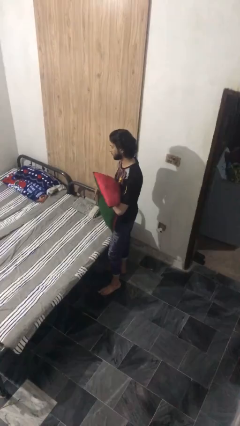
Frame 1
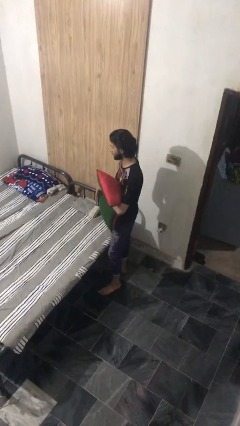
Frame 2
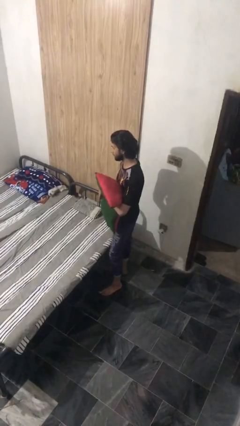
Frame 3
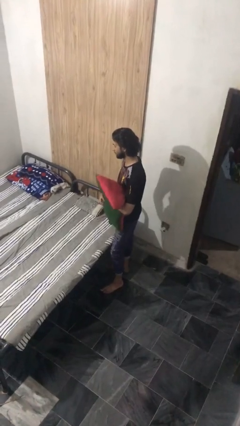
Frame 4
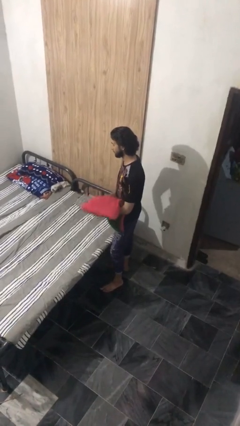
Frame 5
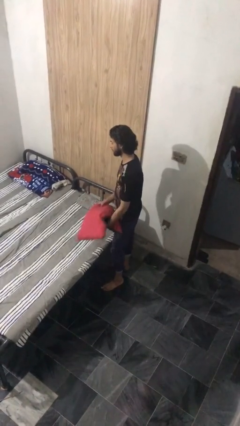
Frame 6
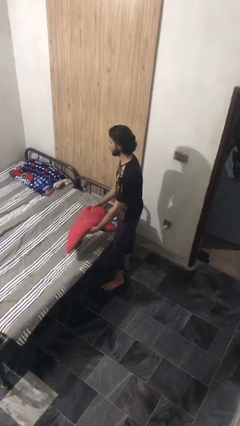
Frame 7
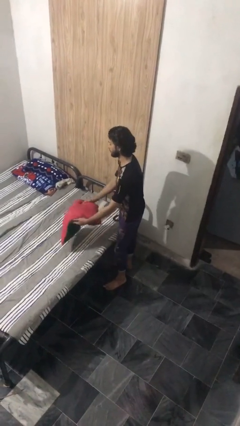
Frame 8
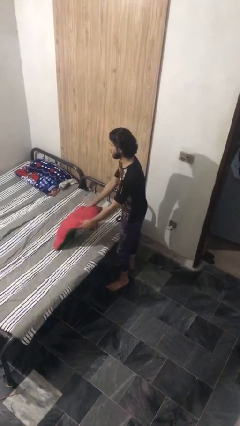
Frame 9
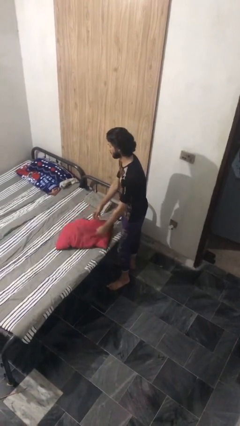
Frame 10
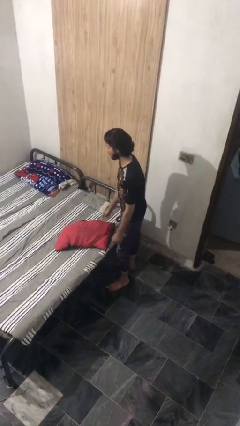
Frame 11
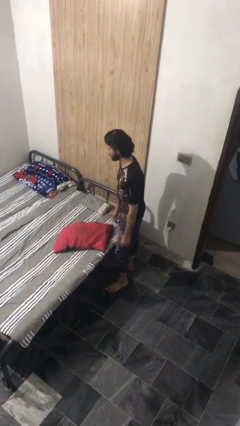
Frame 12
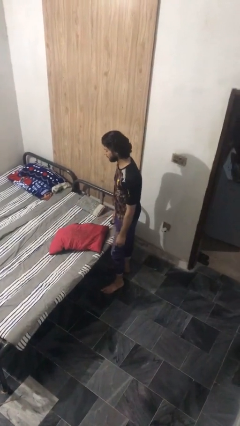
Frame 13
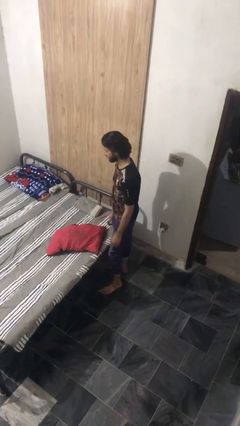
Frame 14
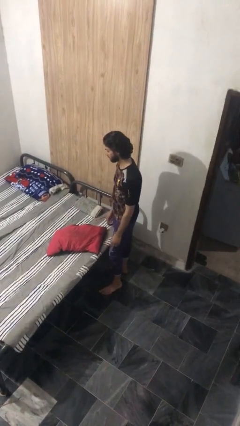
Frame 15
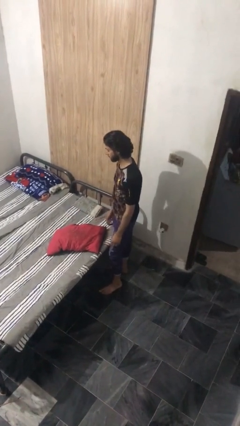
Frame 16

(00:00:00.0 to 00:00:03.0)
person puts down object on bed

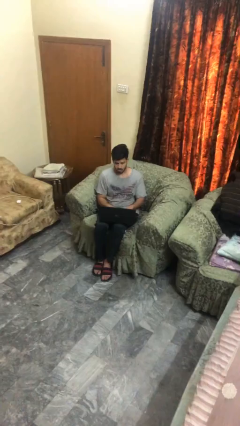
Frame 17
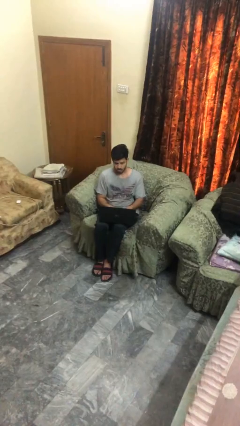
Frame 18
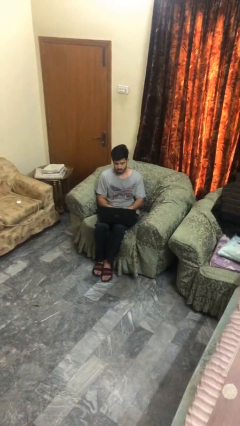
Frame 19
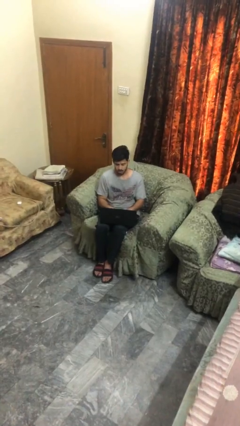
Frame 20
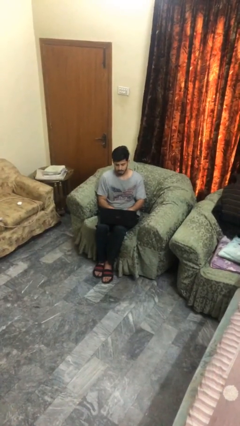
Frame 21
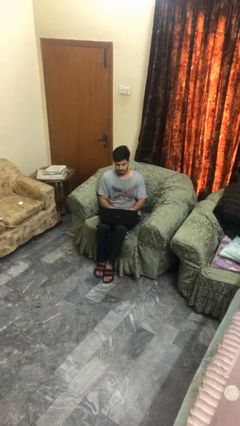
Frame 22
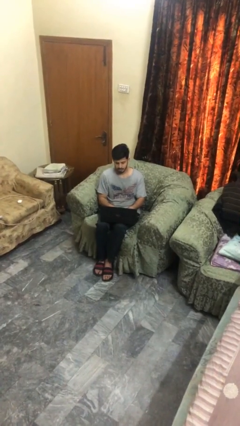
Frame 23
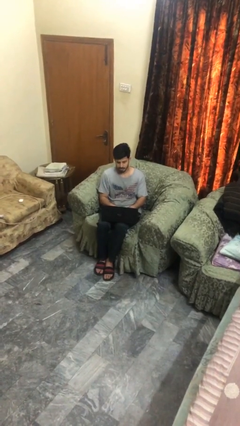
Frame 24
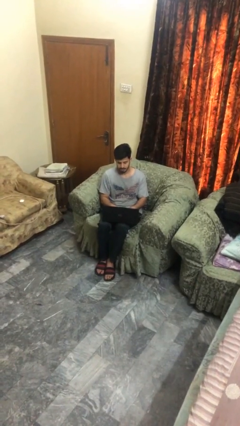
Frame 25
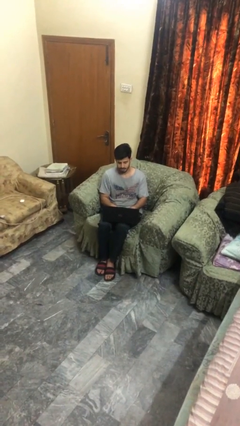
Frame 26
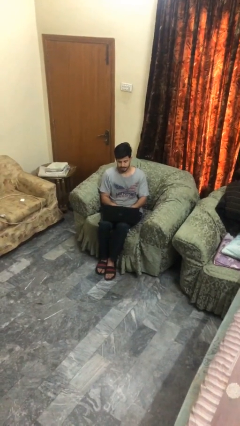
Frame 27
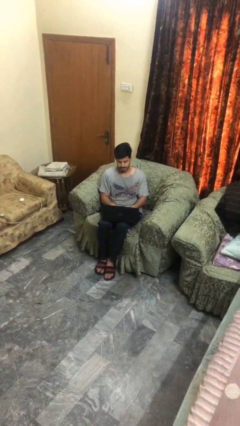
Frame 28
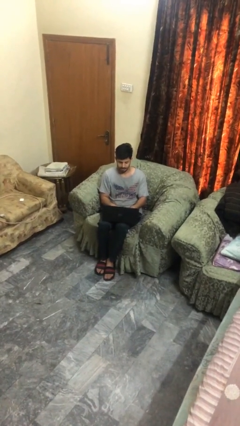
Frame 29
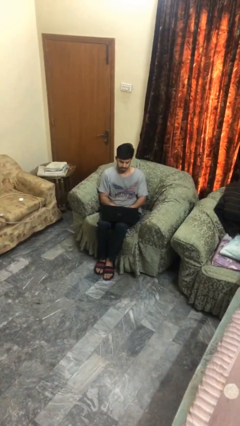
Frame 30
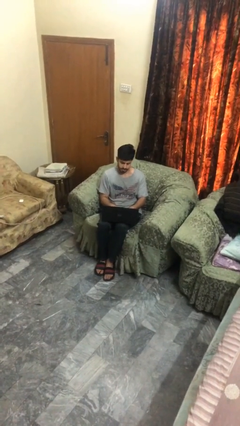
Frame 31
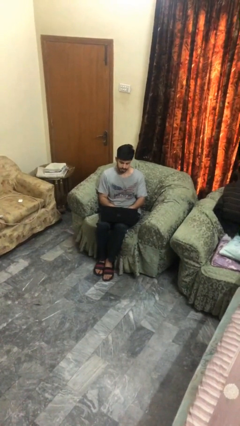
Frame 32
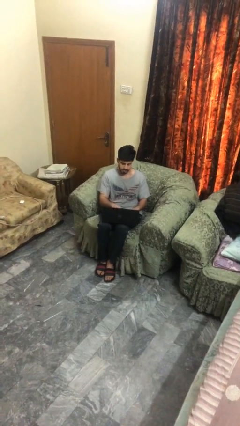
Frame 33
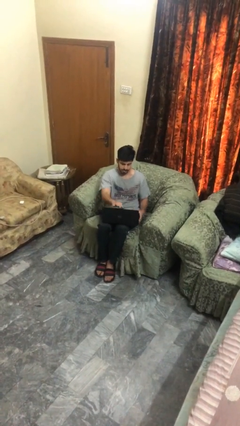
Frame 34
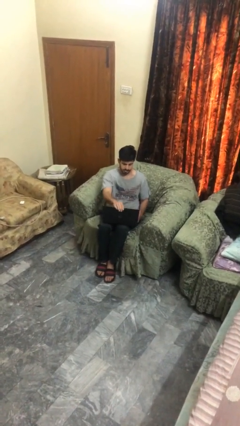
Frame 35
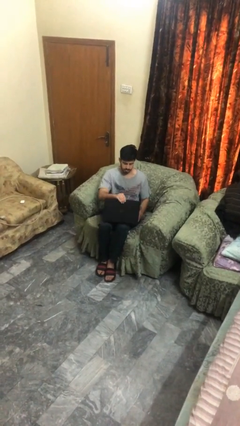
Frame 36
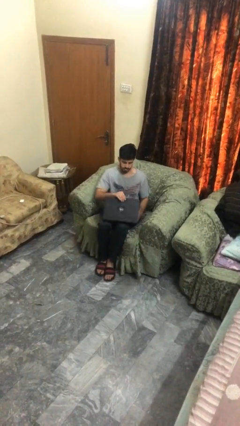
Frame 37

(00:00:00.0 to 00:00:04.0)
person interacts with laptop

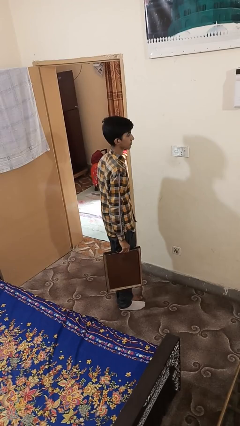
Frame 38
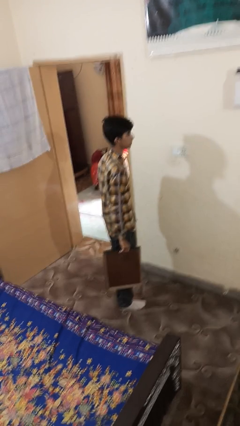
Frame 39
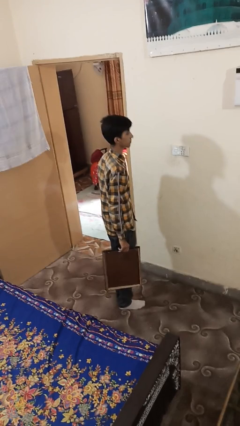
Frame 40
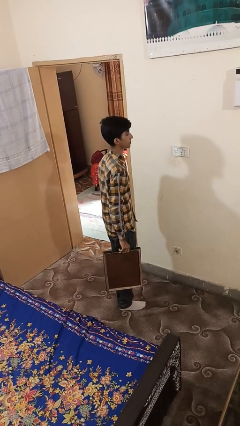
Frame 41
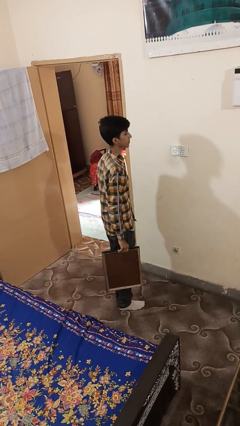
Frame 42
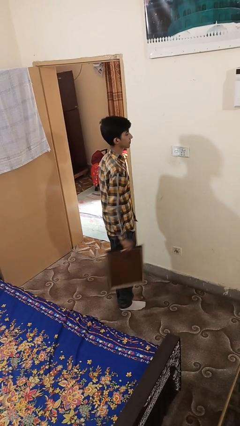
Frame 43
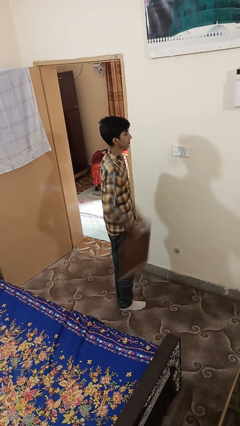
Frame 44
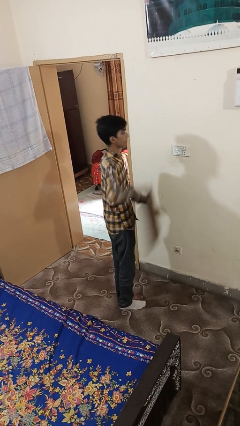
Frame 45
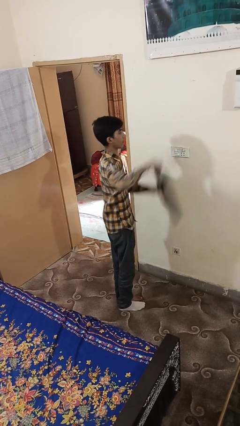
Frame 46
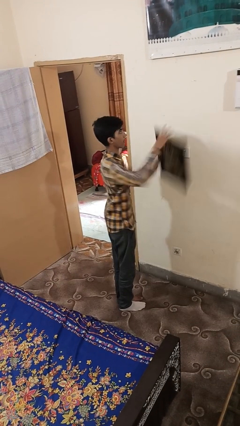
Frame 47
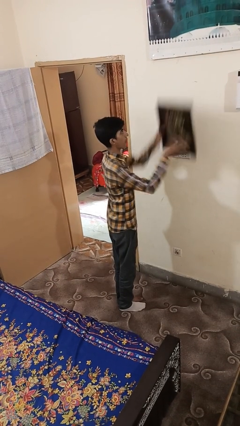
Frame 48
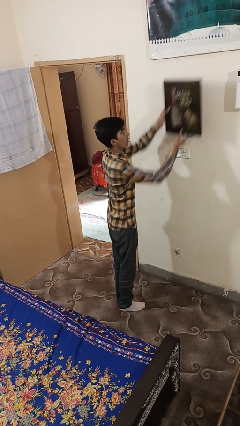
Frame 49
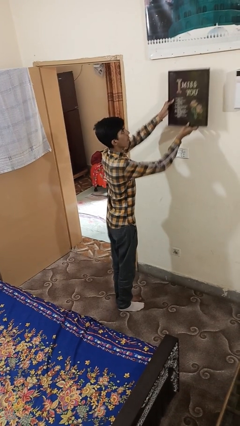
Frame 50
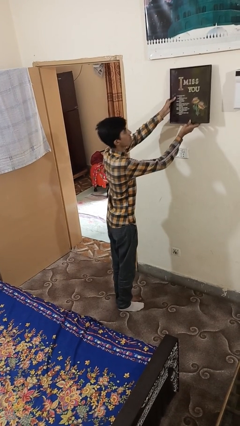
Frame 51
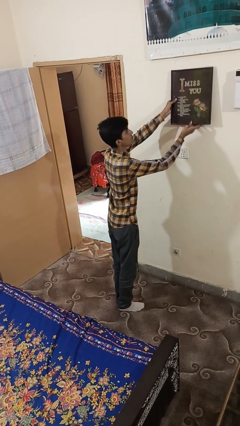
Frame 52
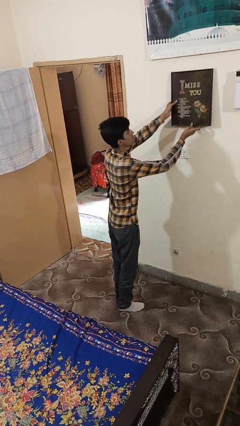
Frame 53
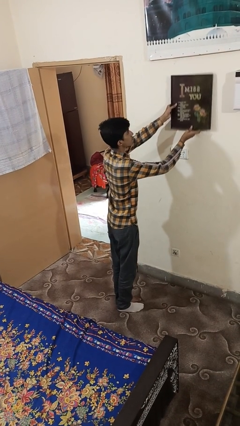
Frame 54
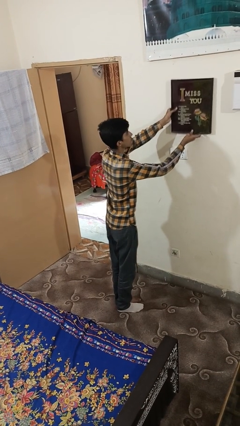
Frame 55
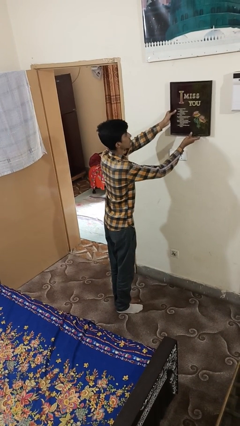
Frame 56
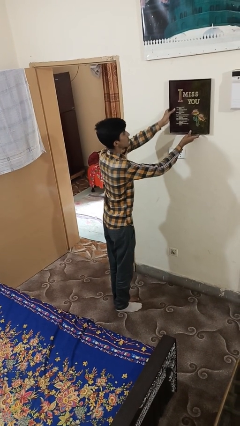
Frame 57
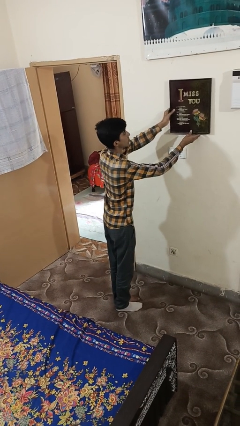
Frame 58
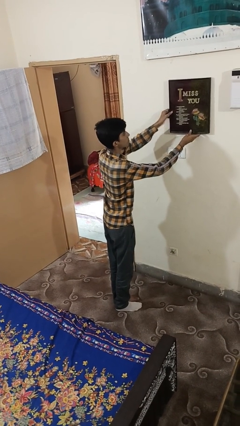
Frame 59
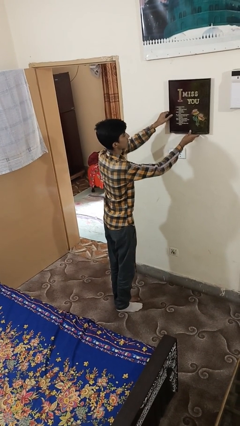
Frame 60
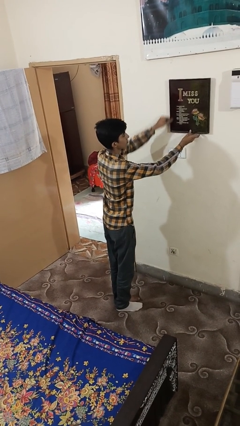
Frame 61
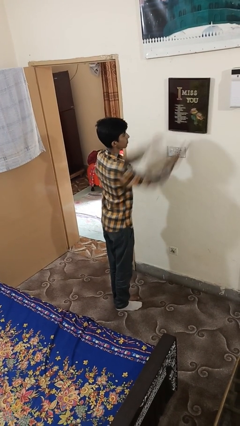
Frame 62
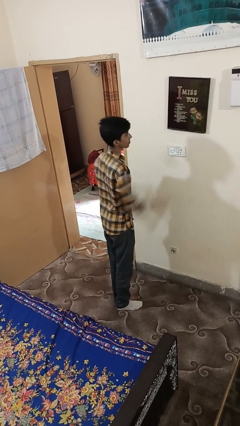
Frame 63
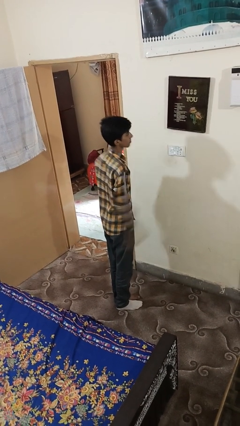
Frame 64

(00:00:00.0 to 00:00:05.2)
person puts up picture frame

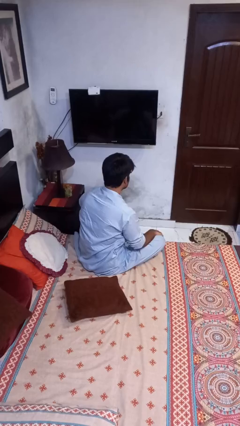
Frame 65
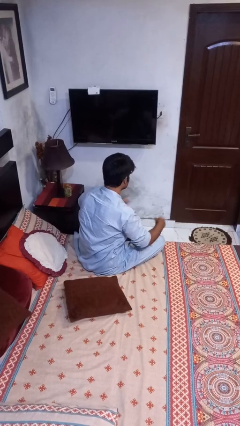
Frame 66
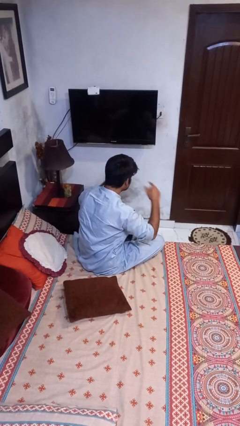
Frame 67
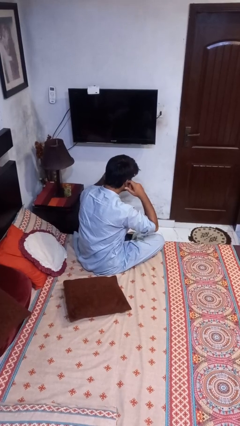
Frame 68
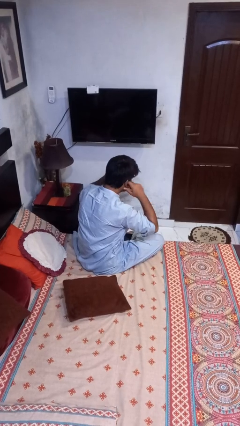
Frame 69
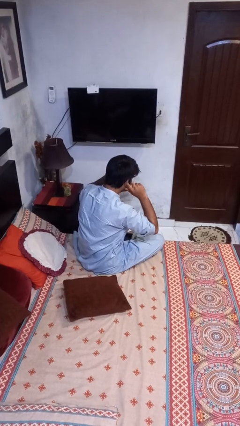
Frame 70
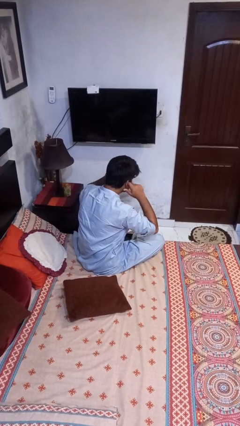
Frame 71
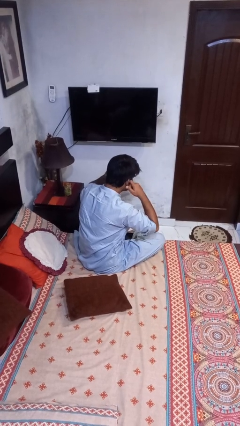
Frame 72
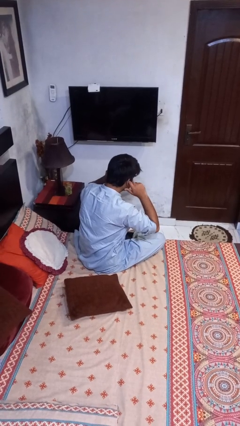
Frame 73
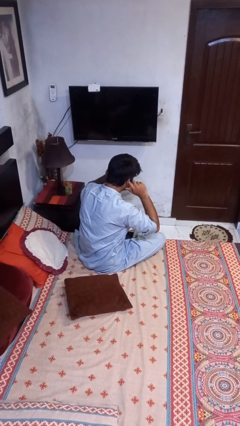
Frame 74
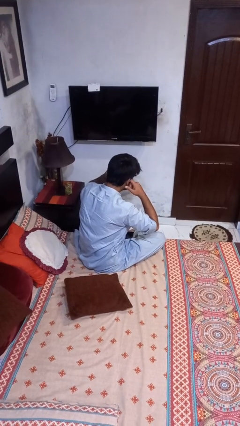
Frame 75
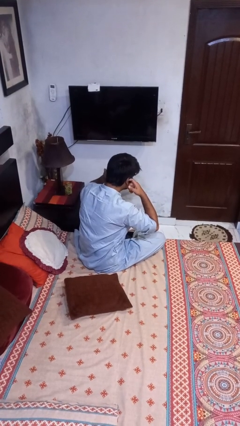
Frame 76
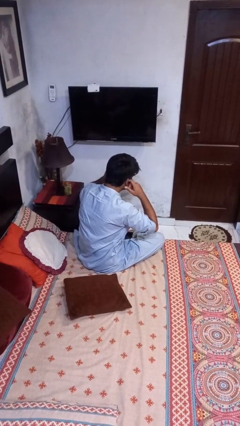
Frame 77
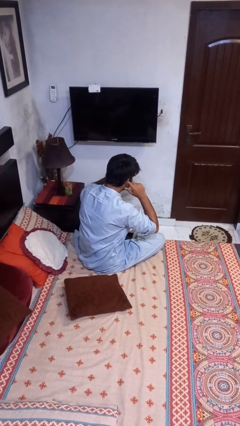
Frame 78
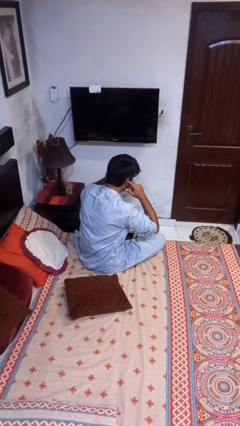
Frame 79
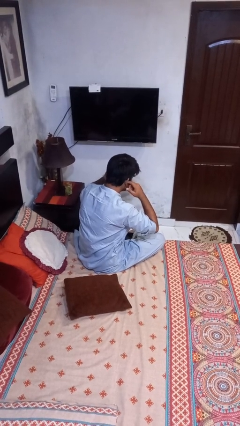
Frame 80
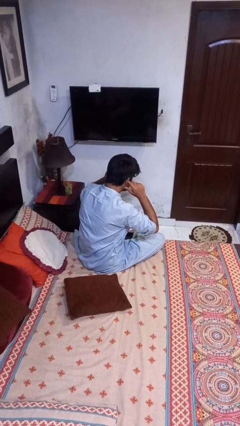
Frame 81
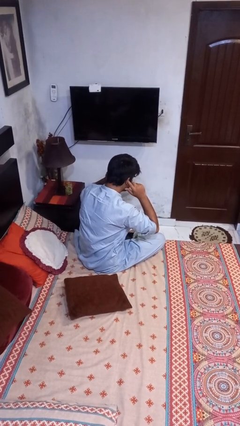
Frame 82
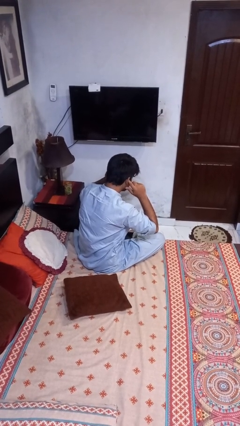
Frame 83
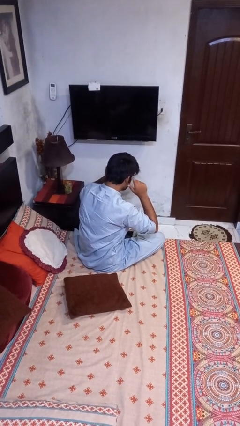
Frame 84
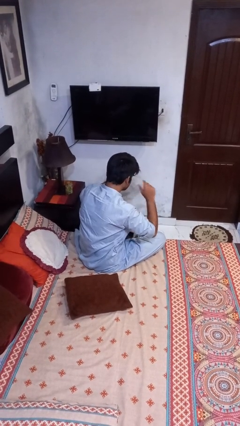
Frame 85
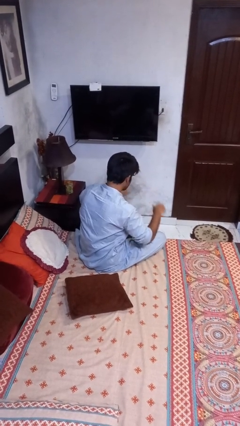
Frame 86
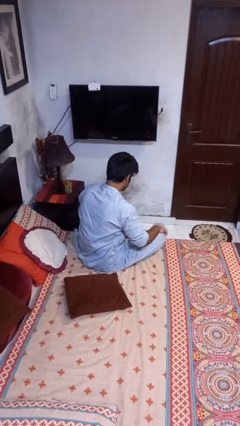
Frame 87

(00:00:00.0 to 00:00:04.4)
person puts fingers in ear

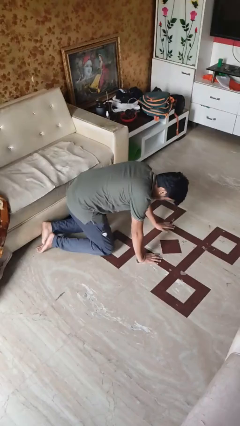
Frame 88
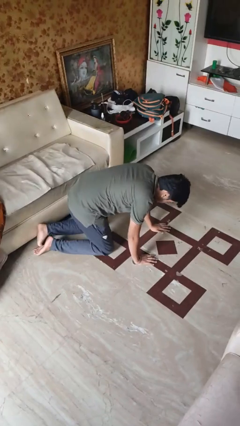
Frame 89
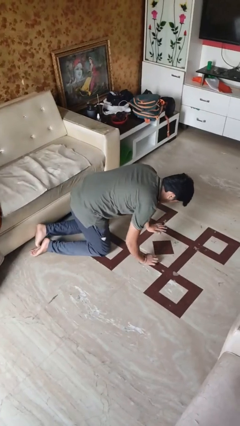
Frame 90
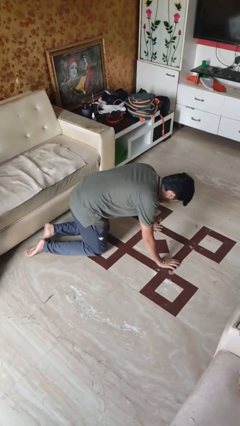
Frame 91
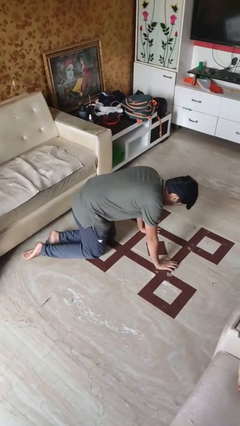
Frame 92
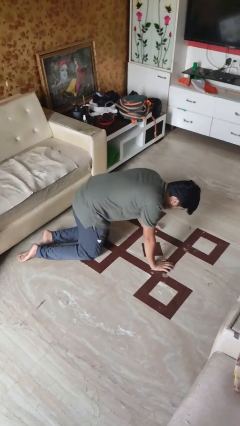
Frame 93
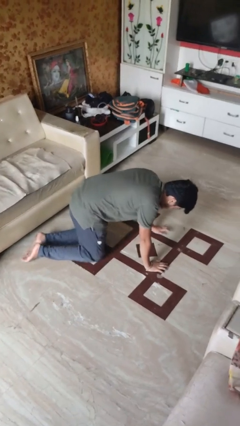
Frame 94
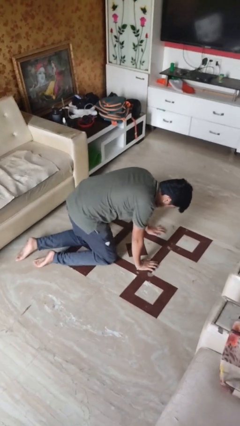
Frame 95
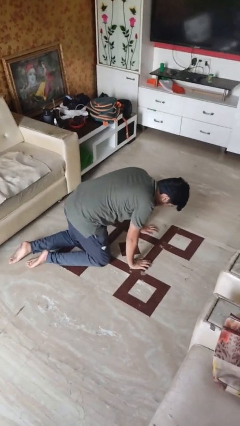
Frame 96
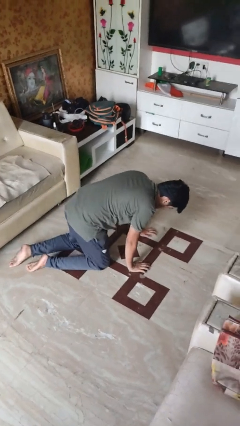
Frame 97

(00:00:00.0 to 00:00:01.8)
person crawls
